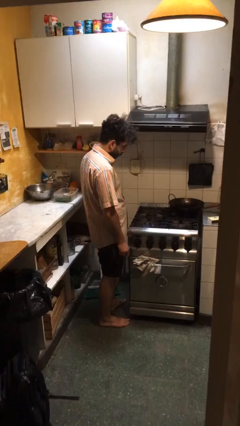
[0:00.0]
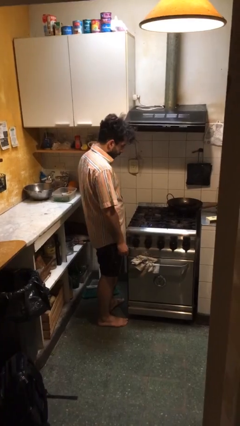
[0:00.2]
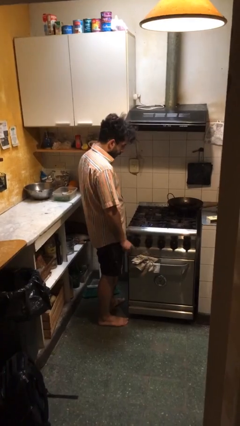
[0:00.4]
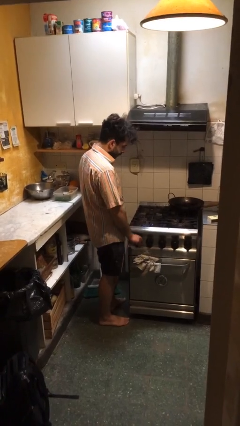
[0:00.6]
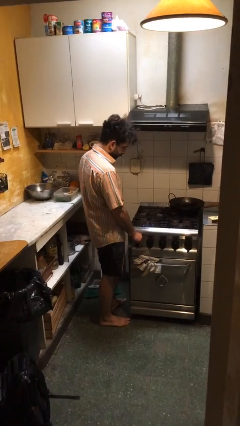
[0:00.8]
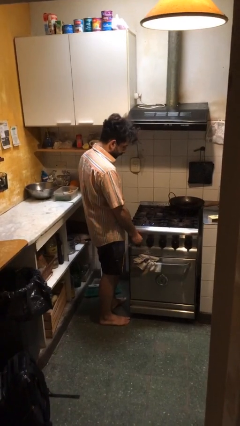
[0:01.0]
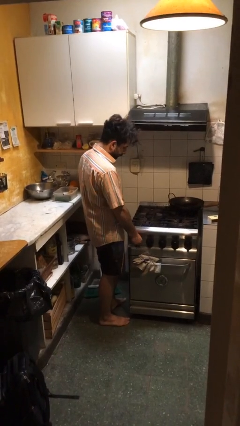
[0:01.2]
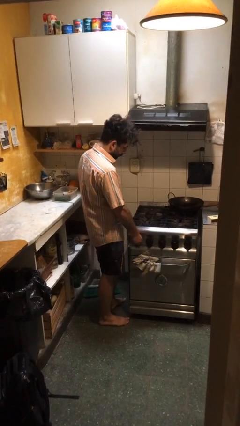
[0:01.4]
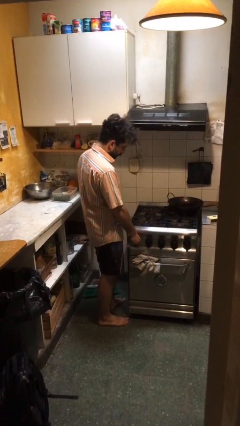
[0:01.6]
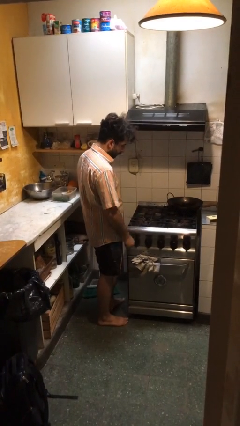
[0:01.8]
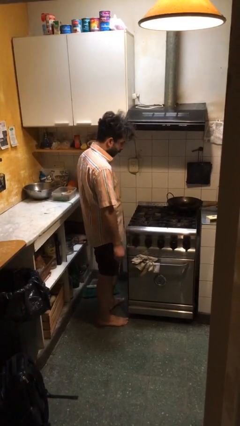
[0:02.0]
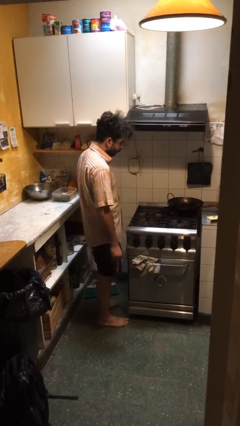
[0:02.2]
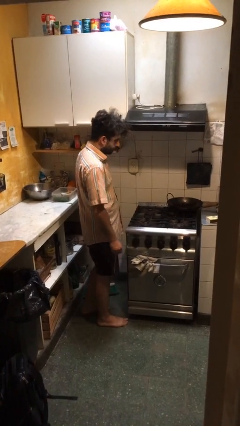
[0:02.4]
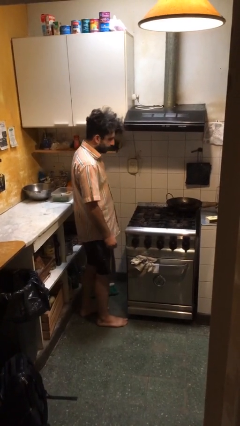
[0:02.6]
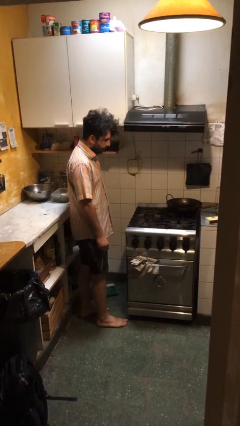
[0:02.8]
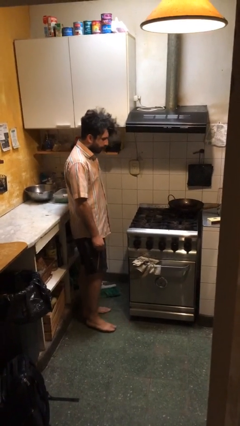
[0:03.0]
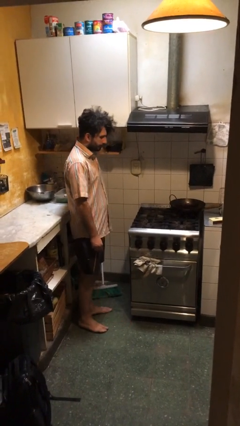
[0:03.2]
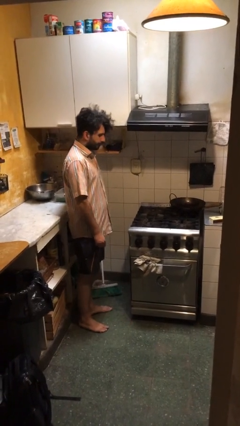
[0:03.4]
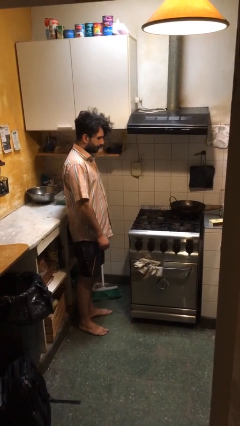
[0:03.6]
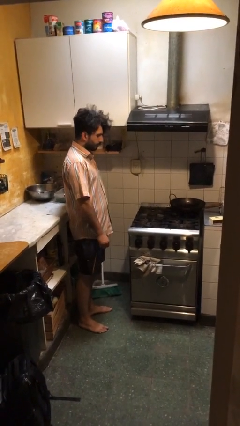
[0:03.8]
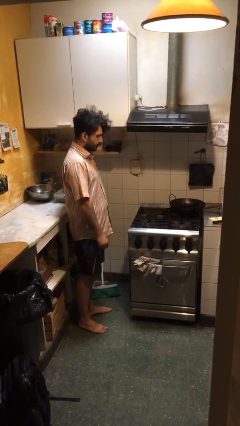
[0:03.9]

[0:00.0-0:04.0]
person turns off stovetop

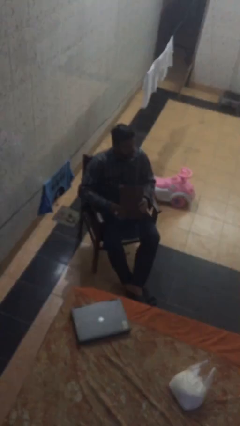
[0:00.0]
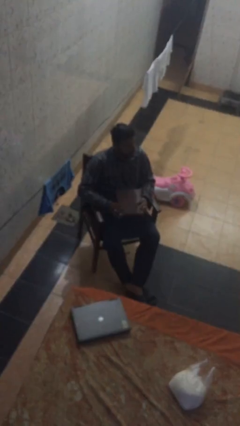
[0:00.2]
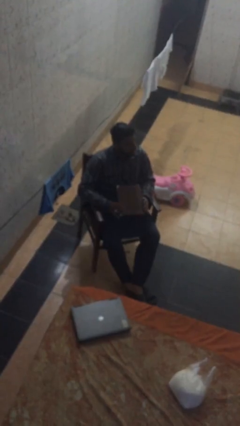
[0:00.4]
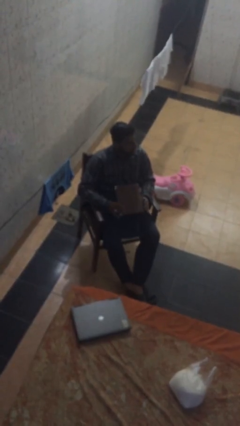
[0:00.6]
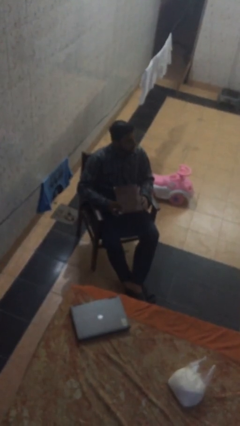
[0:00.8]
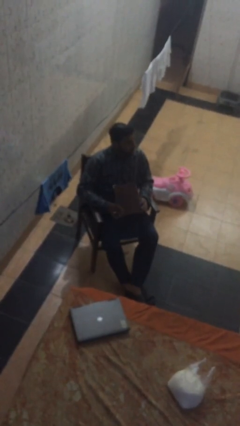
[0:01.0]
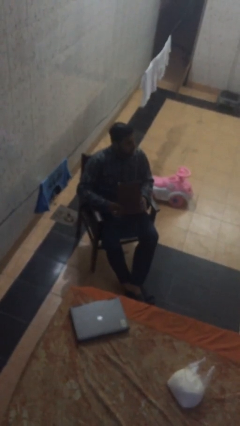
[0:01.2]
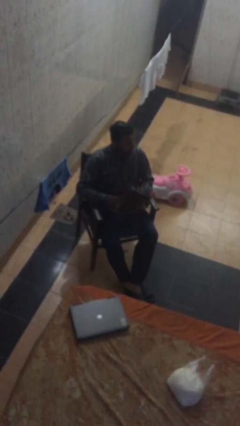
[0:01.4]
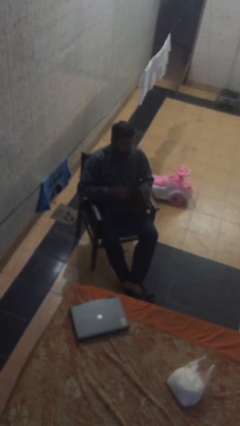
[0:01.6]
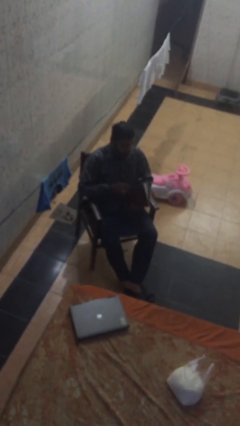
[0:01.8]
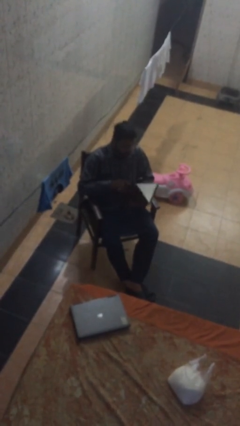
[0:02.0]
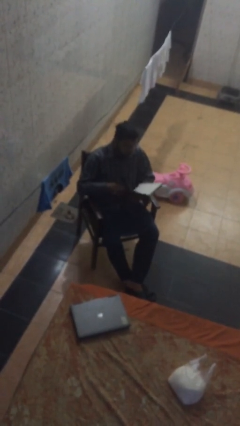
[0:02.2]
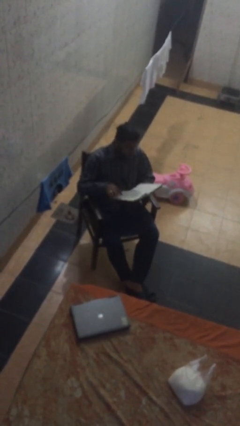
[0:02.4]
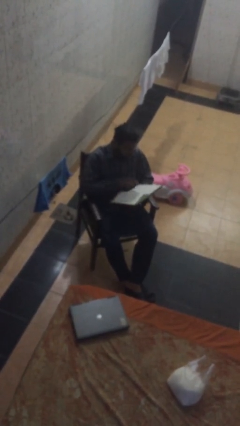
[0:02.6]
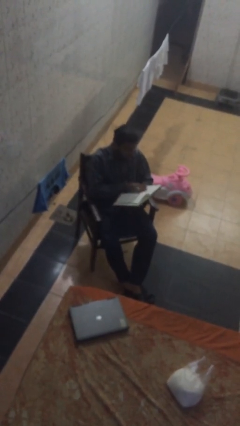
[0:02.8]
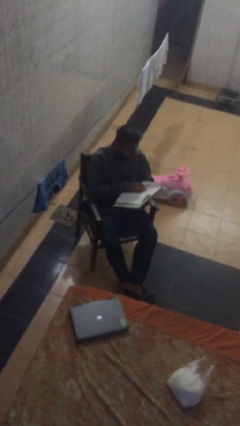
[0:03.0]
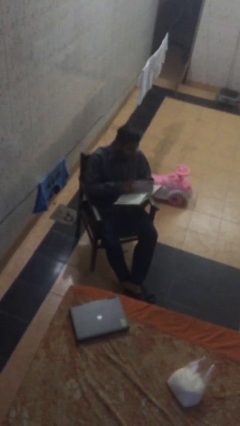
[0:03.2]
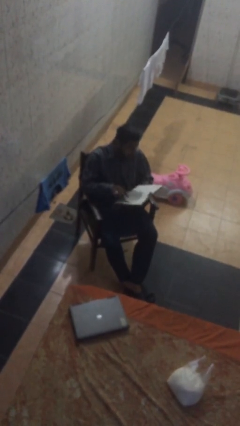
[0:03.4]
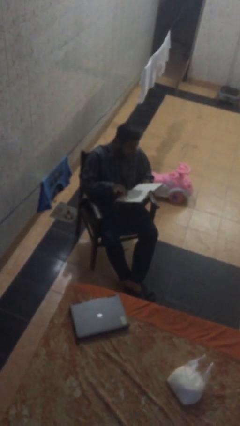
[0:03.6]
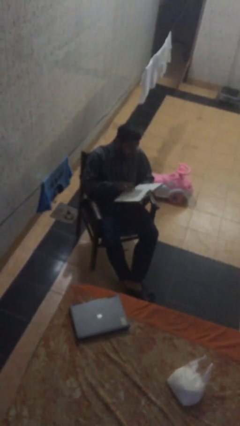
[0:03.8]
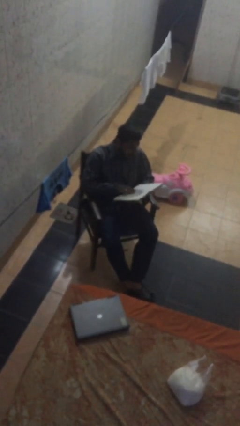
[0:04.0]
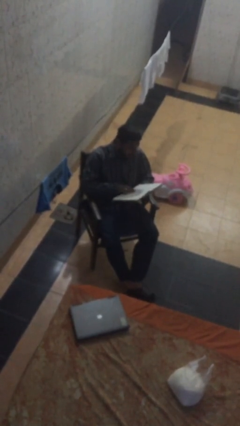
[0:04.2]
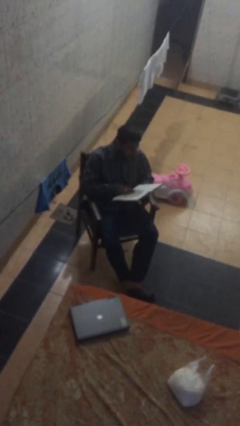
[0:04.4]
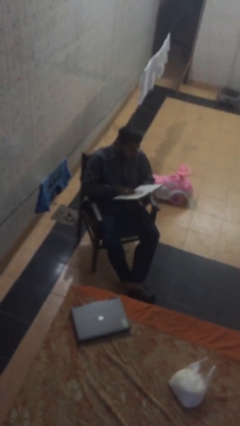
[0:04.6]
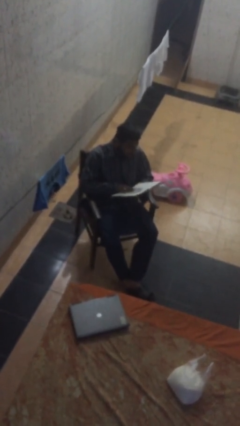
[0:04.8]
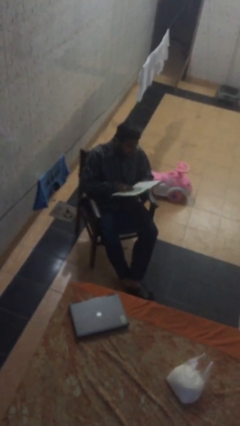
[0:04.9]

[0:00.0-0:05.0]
person reads document

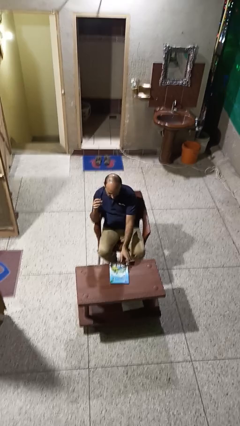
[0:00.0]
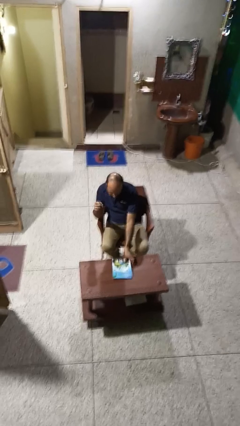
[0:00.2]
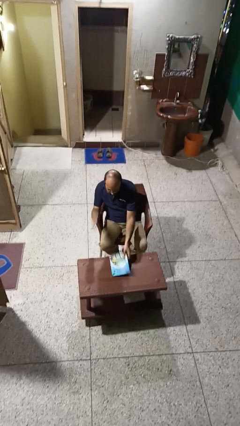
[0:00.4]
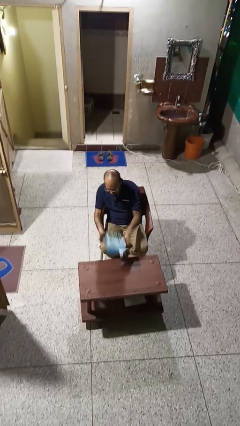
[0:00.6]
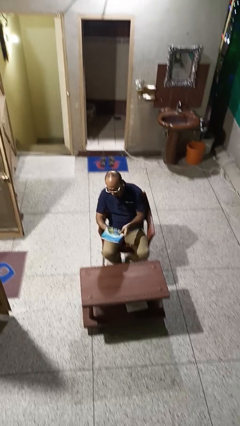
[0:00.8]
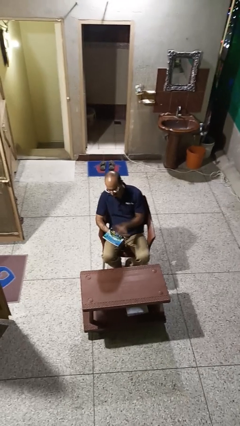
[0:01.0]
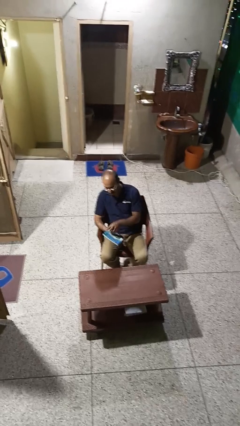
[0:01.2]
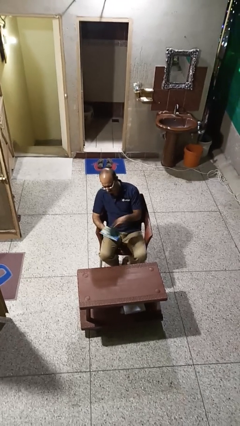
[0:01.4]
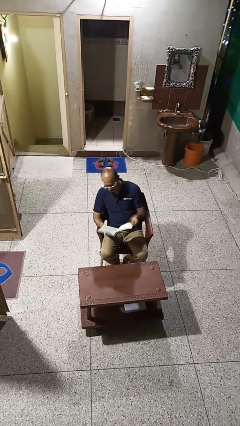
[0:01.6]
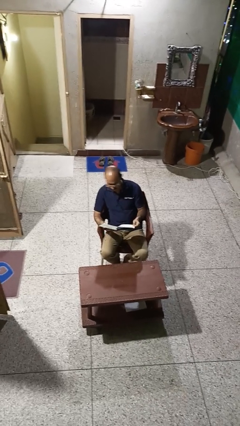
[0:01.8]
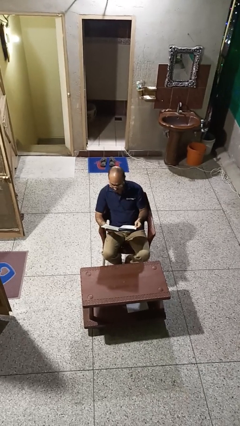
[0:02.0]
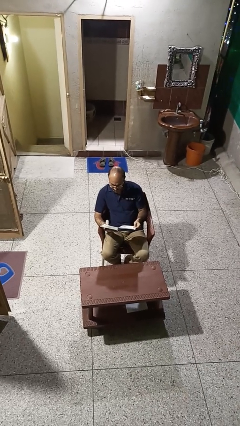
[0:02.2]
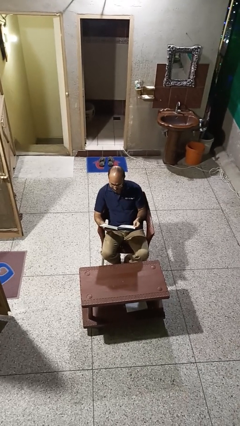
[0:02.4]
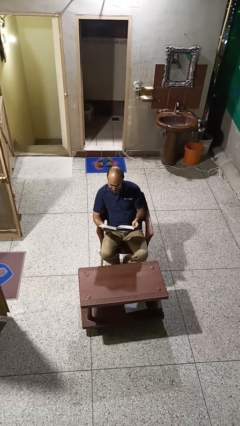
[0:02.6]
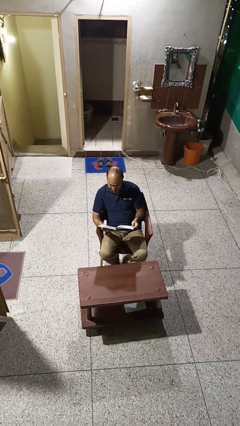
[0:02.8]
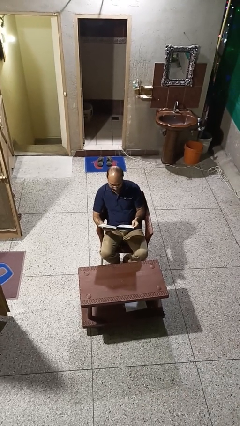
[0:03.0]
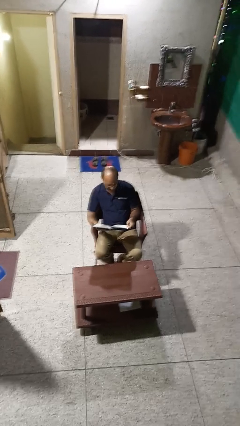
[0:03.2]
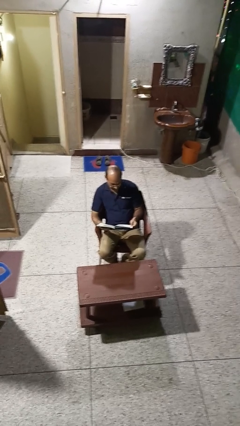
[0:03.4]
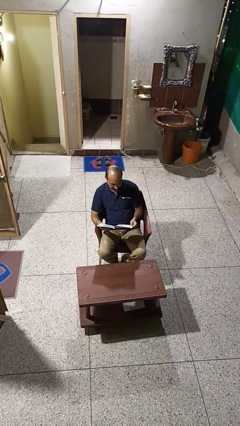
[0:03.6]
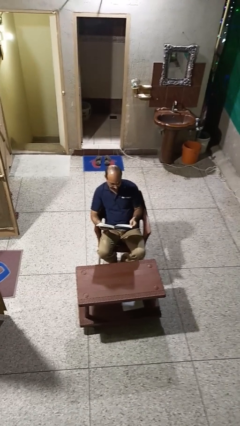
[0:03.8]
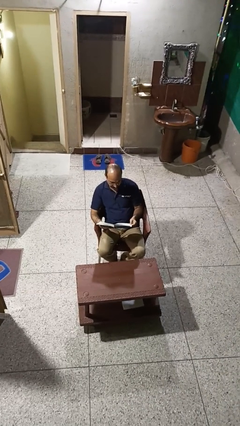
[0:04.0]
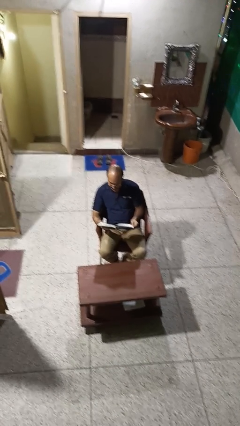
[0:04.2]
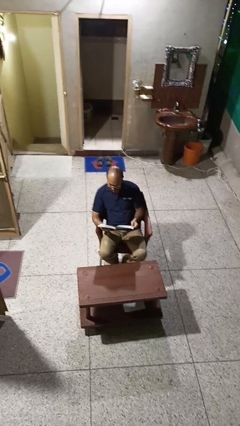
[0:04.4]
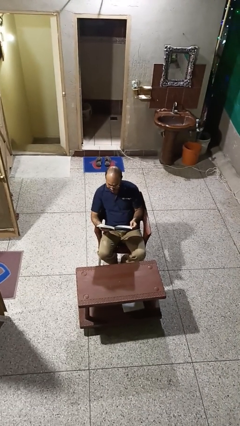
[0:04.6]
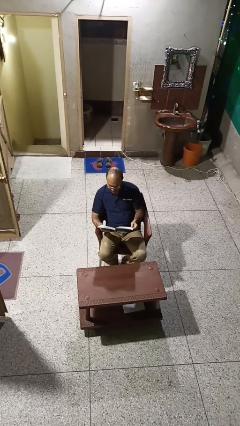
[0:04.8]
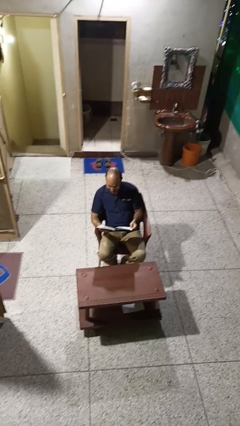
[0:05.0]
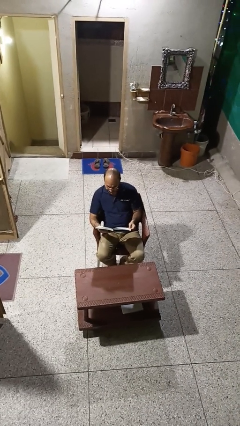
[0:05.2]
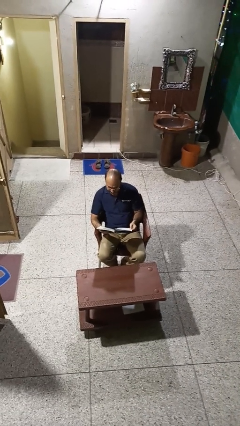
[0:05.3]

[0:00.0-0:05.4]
person reads book

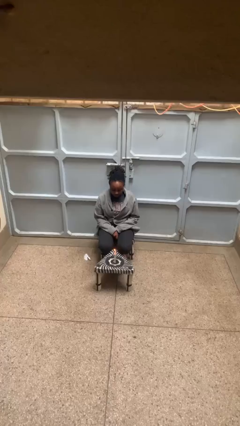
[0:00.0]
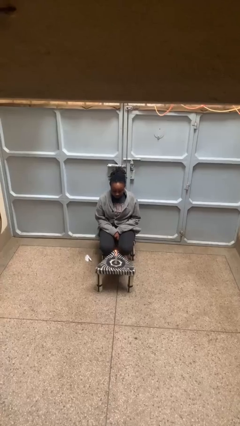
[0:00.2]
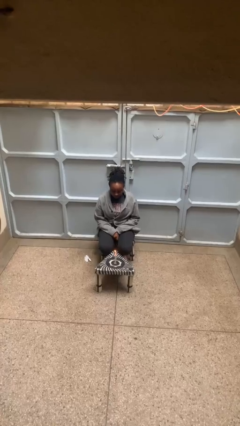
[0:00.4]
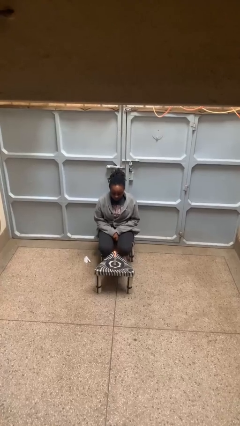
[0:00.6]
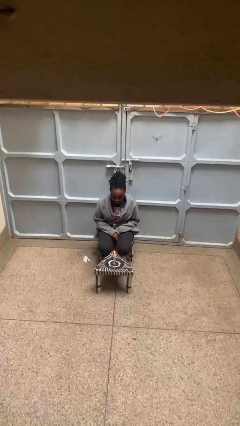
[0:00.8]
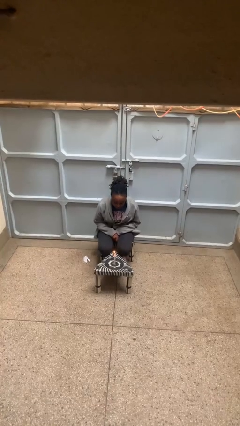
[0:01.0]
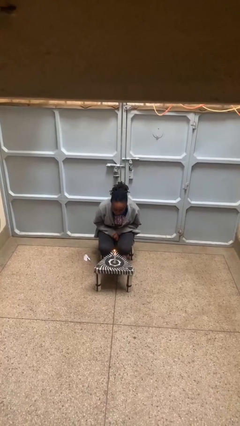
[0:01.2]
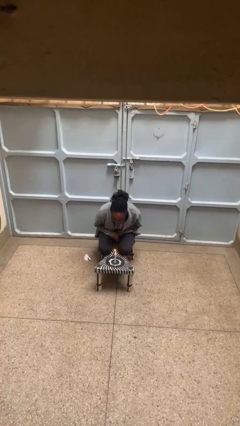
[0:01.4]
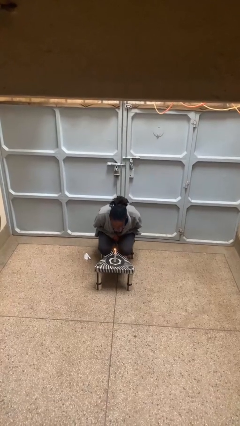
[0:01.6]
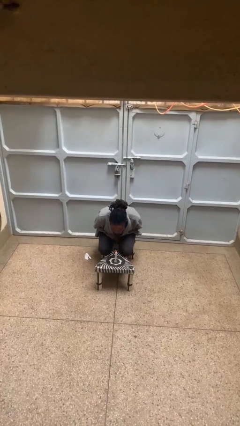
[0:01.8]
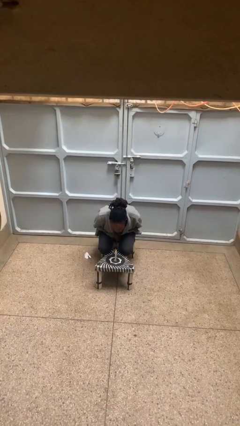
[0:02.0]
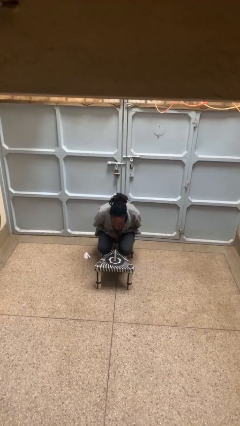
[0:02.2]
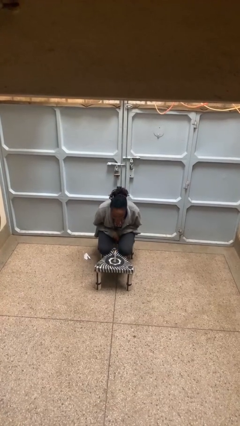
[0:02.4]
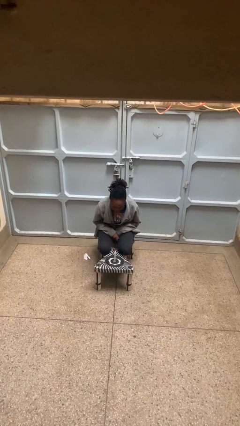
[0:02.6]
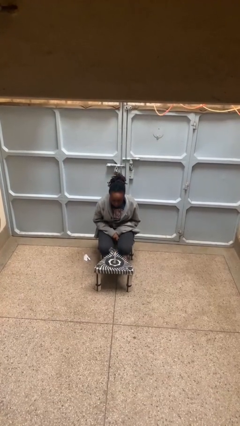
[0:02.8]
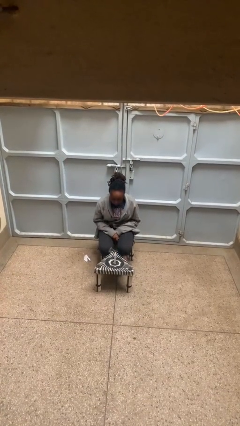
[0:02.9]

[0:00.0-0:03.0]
person extinguishes candle

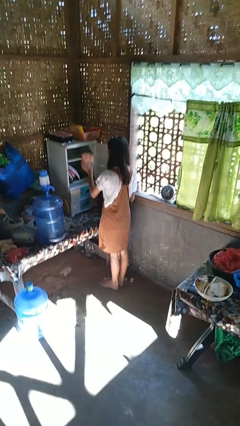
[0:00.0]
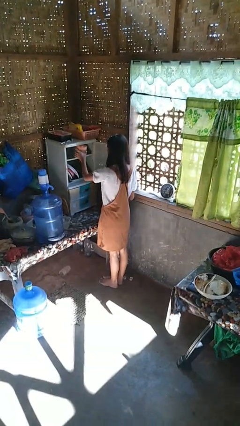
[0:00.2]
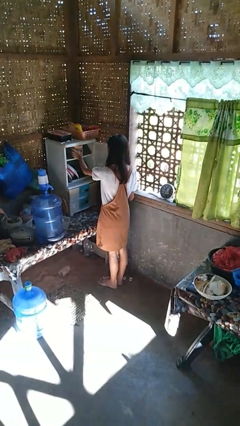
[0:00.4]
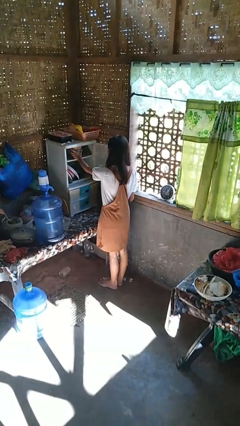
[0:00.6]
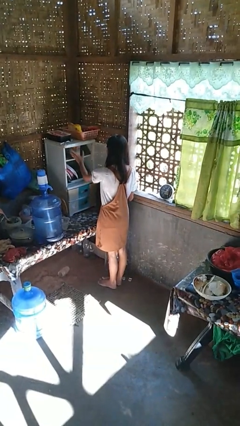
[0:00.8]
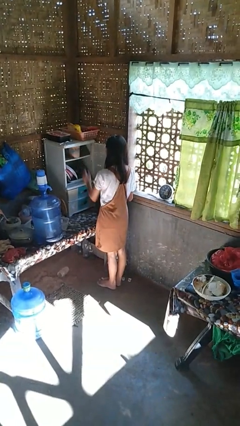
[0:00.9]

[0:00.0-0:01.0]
person puts down object into cabinet
